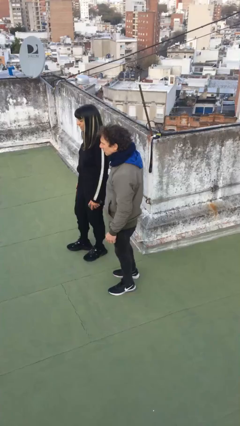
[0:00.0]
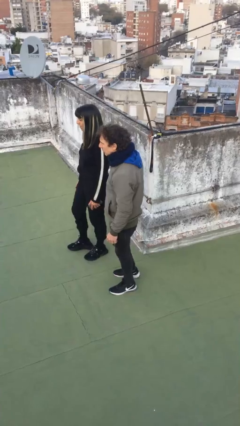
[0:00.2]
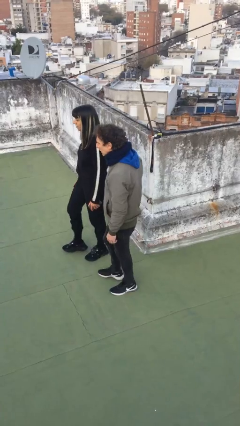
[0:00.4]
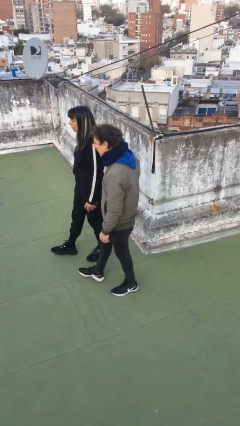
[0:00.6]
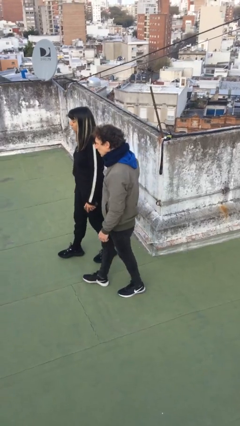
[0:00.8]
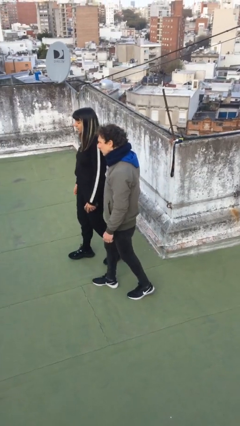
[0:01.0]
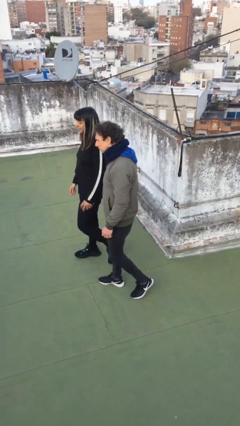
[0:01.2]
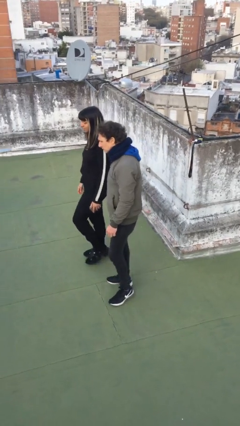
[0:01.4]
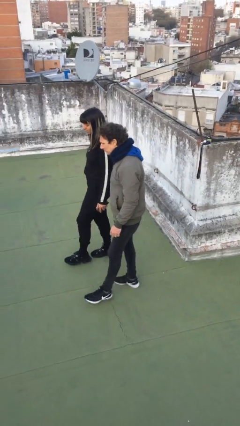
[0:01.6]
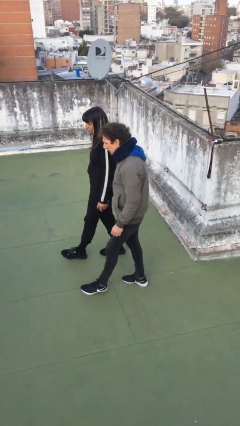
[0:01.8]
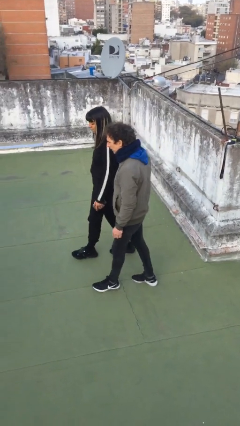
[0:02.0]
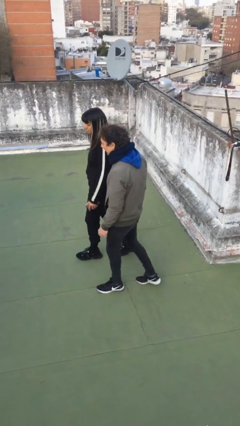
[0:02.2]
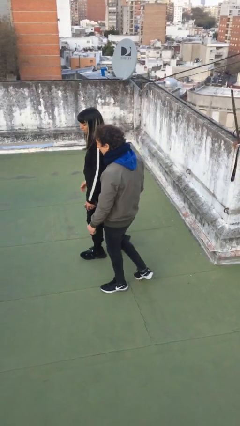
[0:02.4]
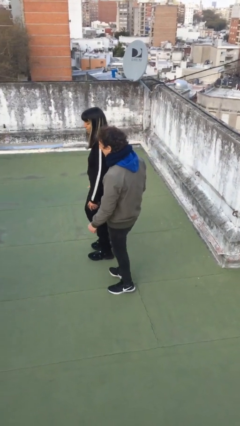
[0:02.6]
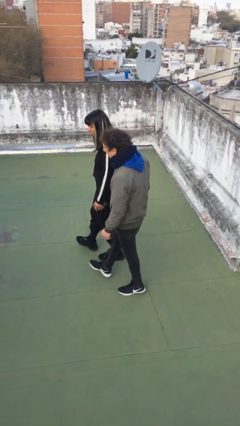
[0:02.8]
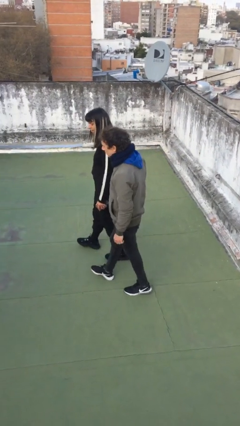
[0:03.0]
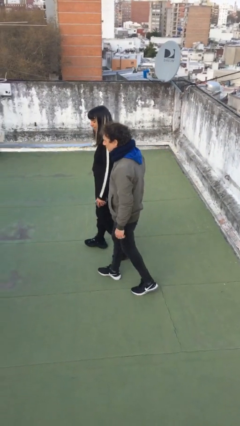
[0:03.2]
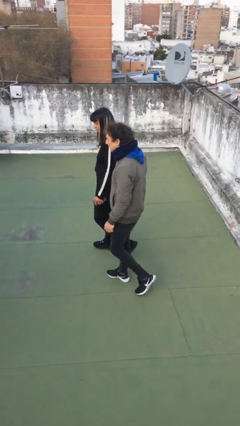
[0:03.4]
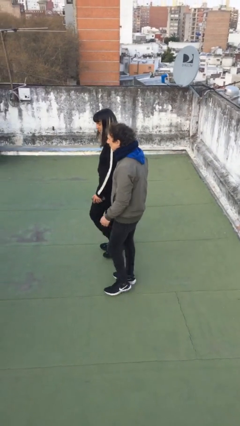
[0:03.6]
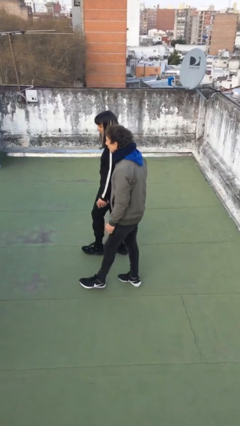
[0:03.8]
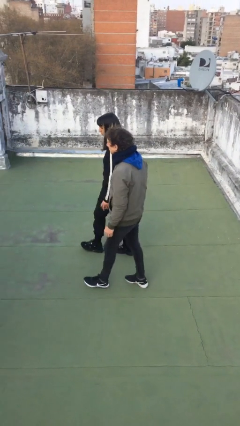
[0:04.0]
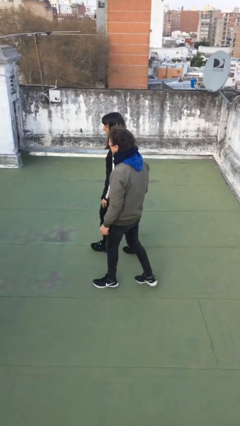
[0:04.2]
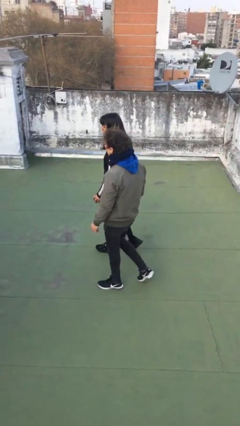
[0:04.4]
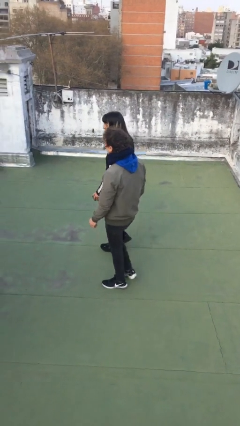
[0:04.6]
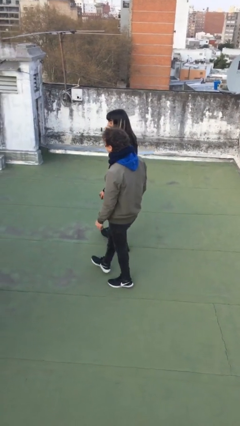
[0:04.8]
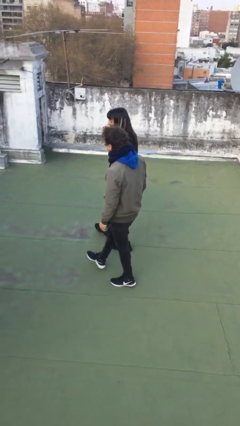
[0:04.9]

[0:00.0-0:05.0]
person talks to person

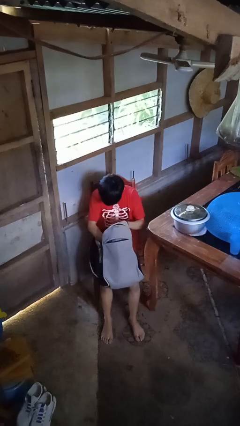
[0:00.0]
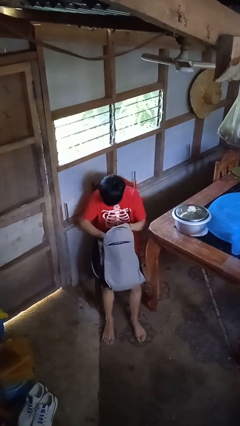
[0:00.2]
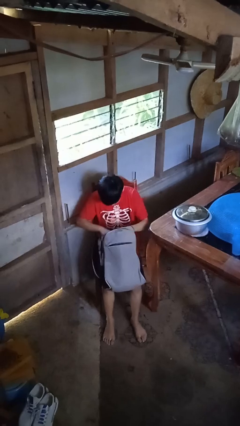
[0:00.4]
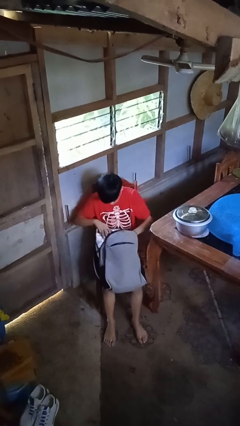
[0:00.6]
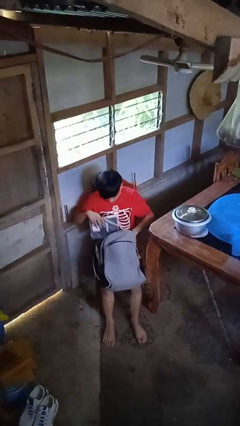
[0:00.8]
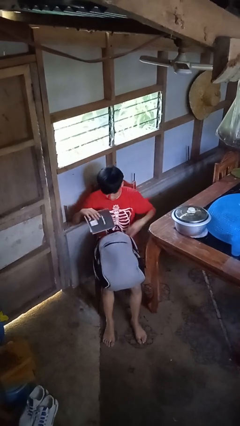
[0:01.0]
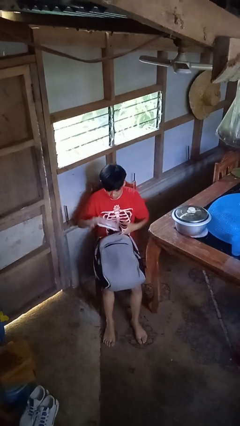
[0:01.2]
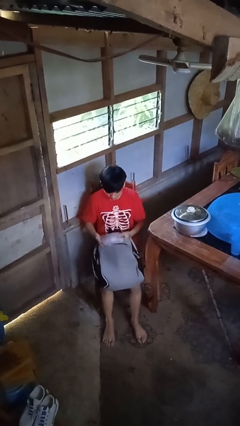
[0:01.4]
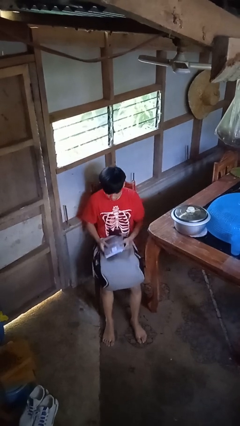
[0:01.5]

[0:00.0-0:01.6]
person takes object from backpack

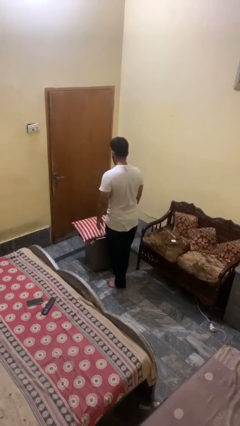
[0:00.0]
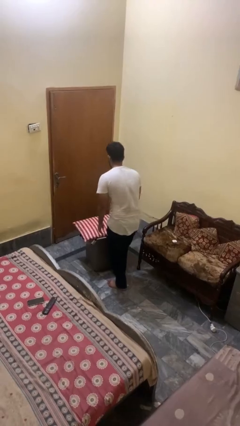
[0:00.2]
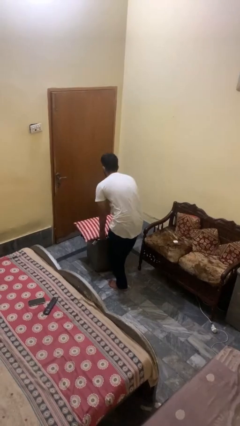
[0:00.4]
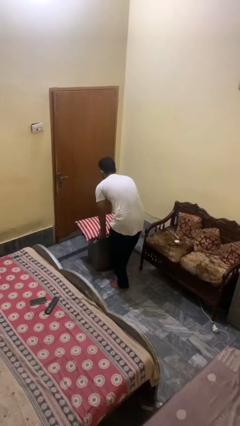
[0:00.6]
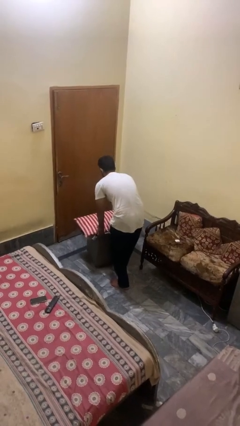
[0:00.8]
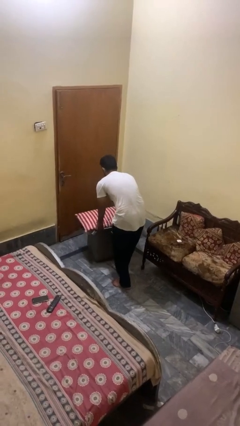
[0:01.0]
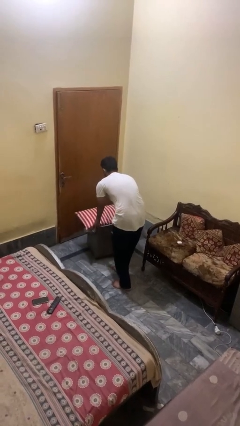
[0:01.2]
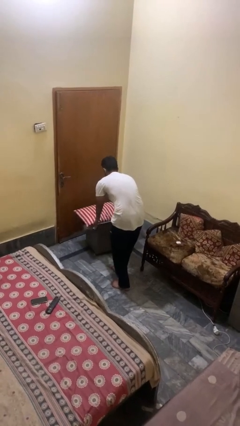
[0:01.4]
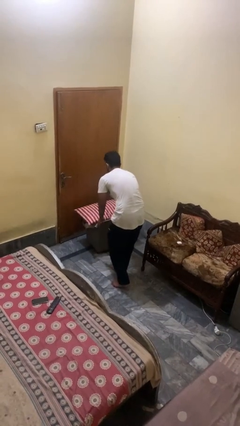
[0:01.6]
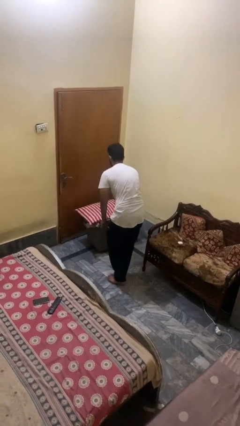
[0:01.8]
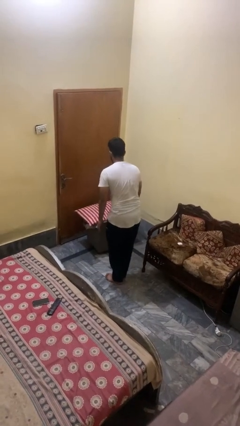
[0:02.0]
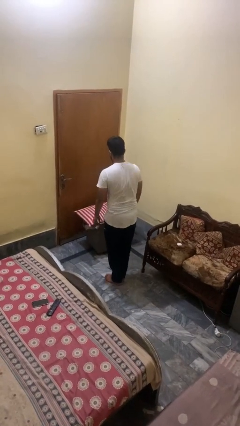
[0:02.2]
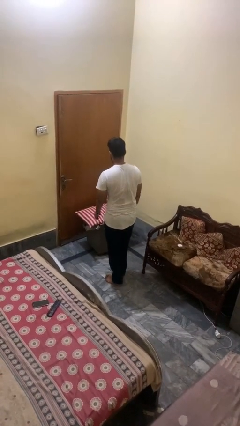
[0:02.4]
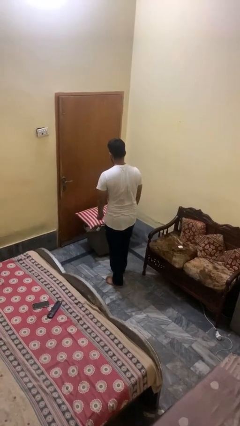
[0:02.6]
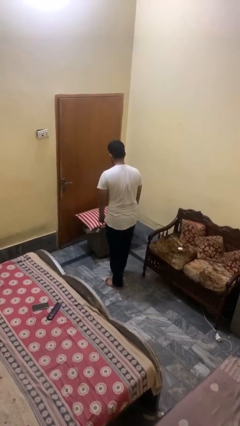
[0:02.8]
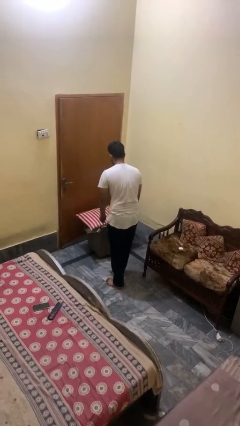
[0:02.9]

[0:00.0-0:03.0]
person pushes wheeled cart

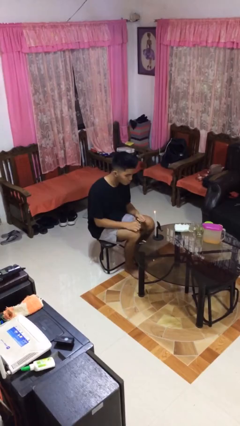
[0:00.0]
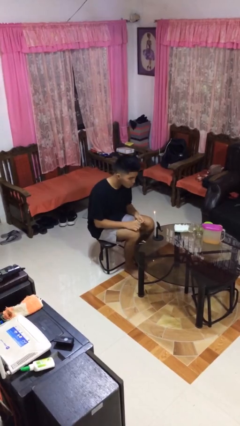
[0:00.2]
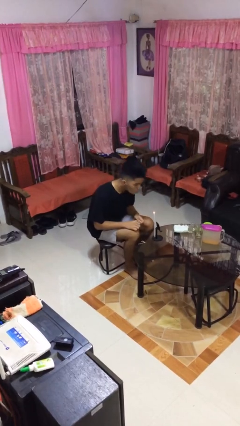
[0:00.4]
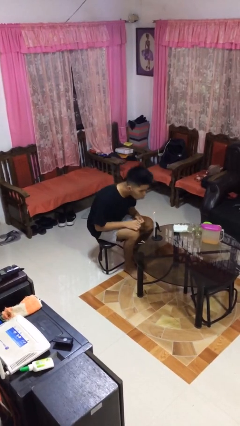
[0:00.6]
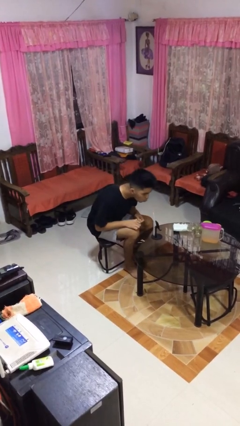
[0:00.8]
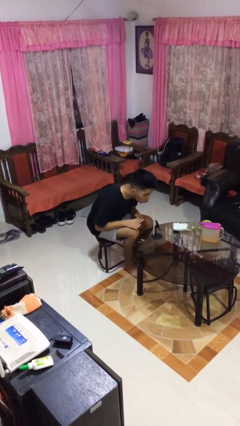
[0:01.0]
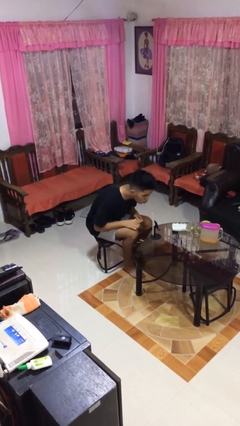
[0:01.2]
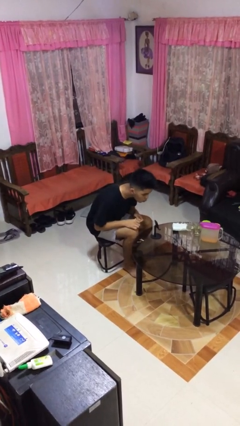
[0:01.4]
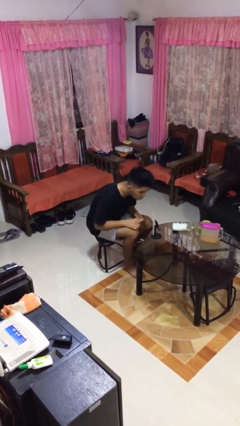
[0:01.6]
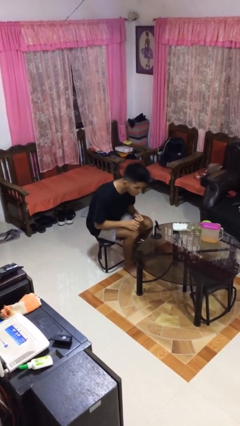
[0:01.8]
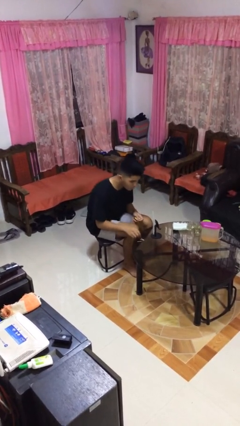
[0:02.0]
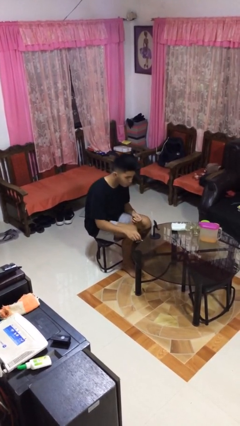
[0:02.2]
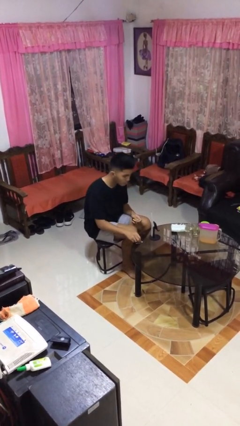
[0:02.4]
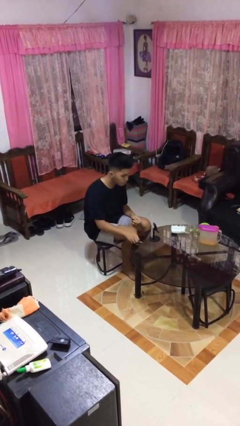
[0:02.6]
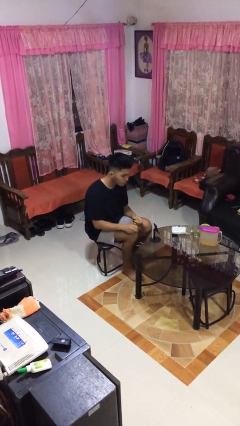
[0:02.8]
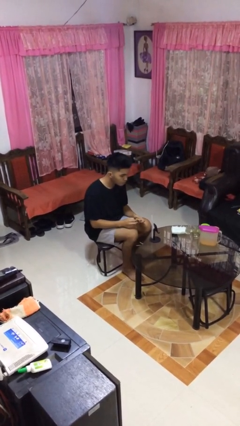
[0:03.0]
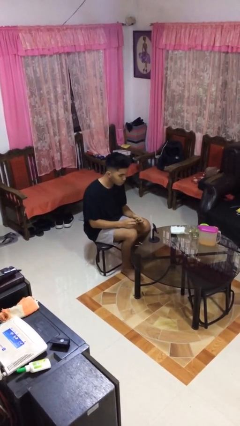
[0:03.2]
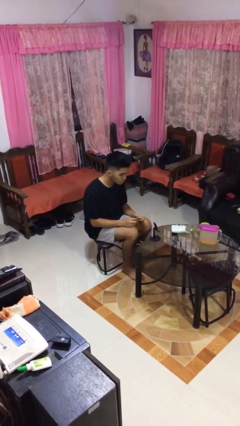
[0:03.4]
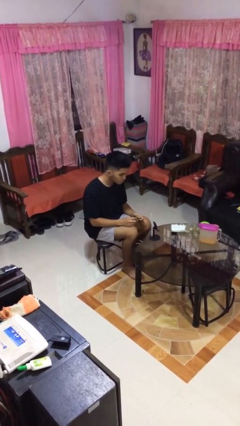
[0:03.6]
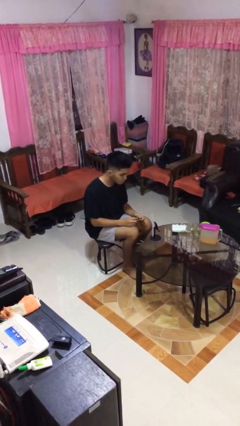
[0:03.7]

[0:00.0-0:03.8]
person extinguishes candle

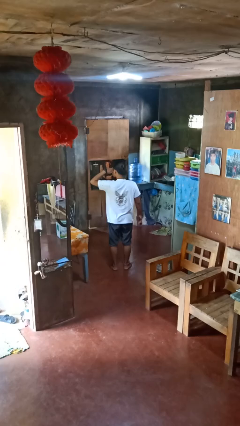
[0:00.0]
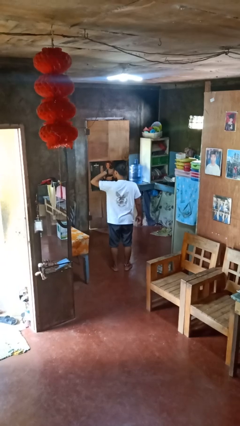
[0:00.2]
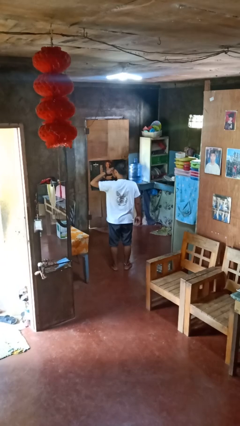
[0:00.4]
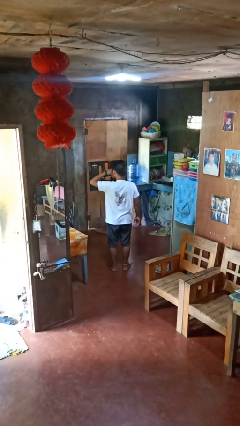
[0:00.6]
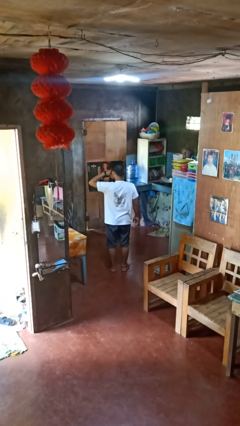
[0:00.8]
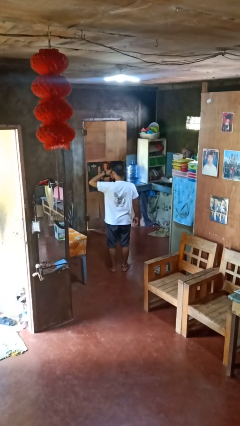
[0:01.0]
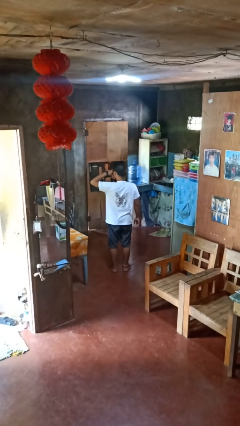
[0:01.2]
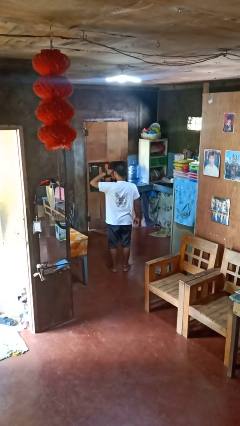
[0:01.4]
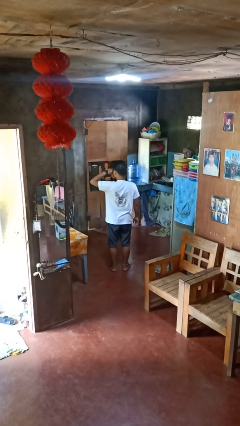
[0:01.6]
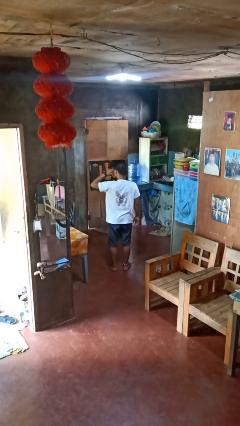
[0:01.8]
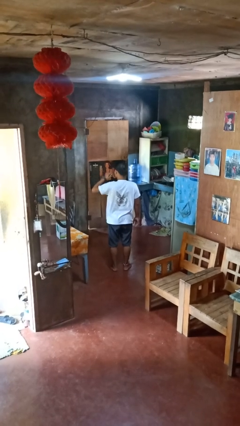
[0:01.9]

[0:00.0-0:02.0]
person rubs eyes

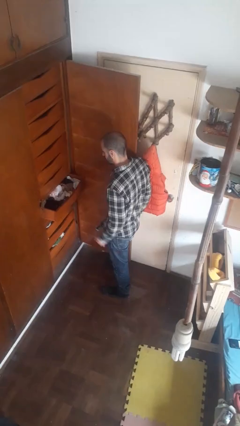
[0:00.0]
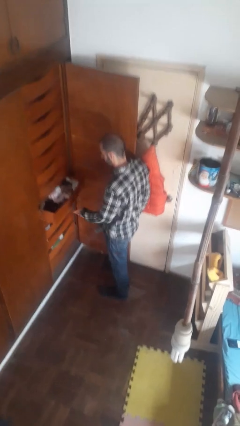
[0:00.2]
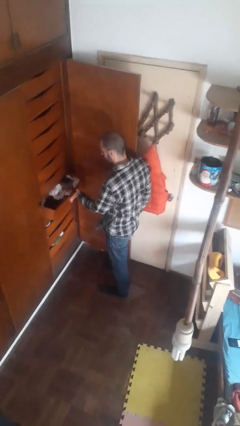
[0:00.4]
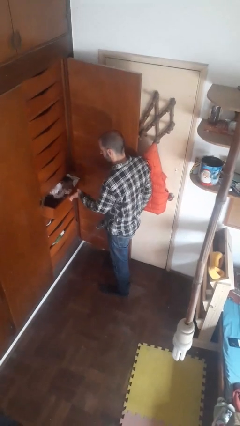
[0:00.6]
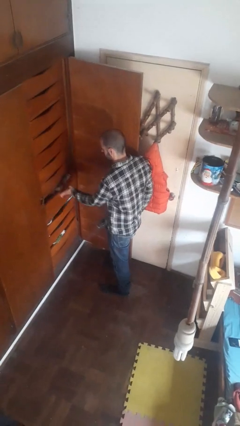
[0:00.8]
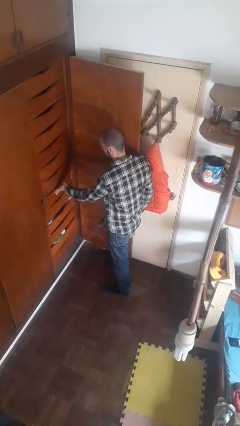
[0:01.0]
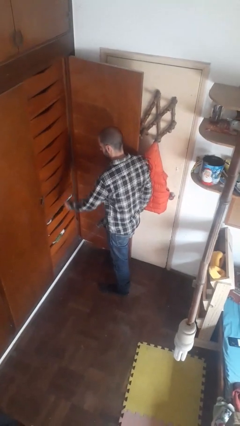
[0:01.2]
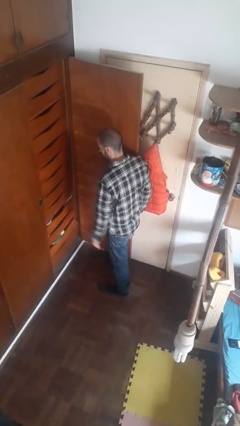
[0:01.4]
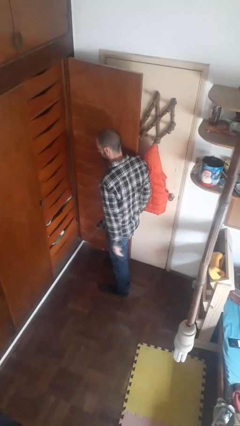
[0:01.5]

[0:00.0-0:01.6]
person closes dresser drawer
